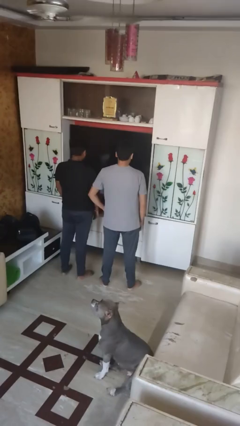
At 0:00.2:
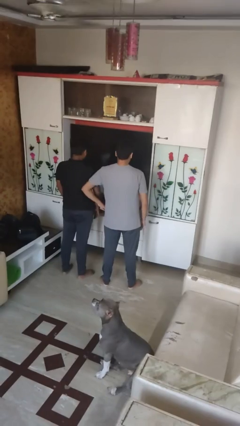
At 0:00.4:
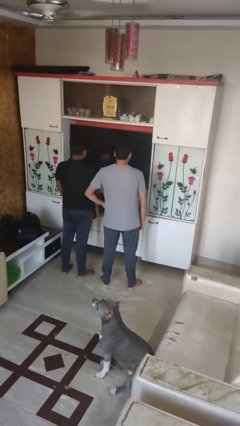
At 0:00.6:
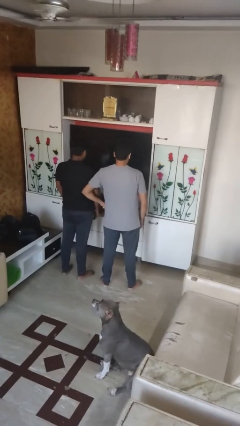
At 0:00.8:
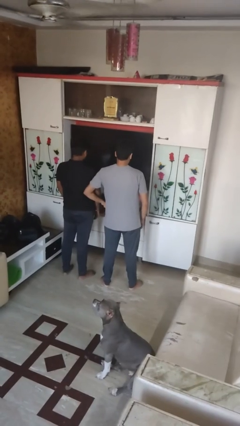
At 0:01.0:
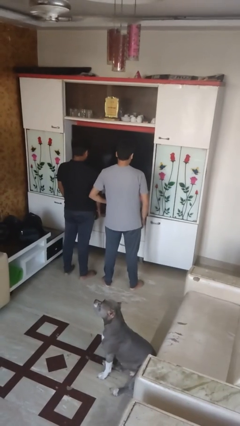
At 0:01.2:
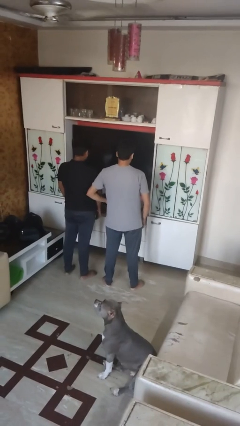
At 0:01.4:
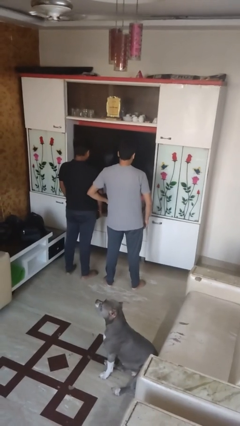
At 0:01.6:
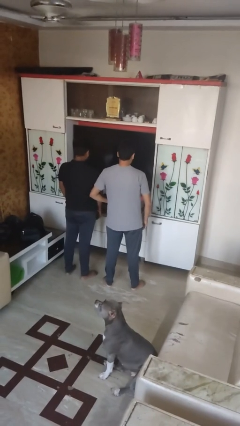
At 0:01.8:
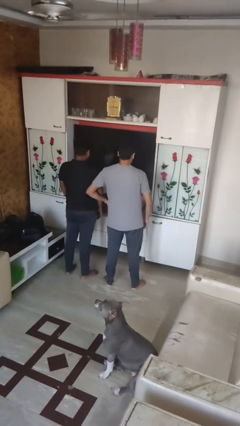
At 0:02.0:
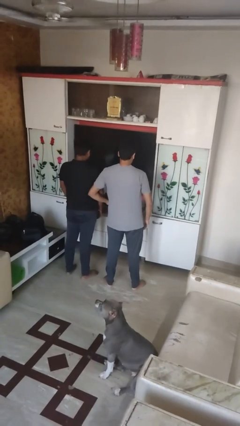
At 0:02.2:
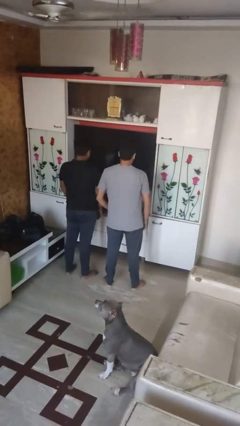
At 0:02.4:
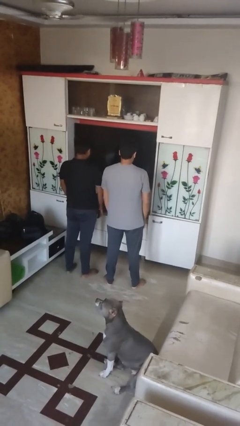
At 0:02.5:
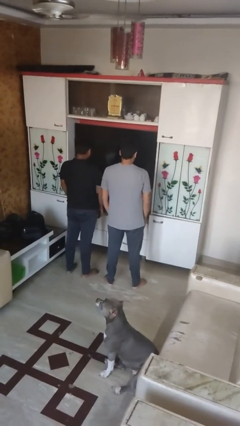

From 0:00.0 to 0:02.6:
person nudges person with elbow

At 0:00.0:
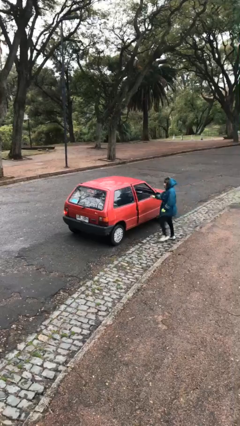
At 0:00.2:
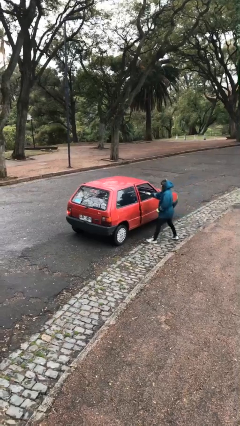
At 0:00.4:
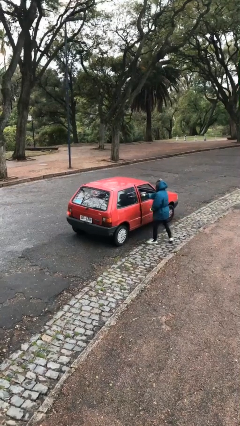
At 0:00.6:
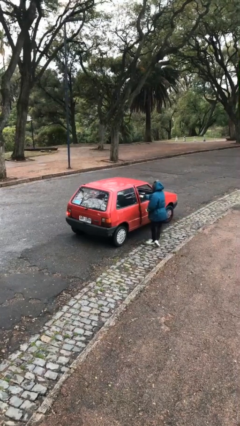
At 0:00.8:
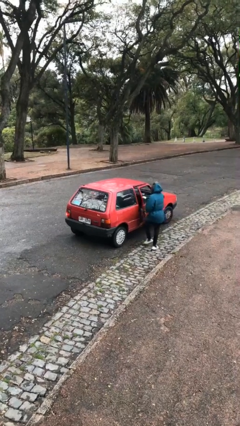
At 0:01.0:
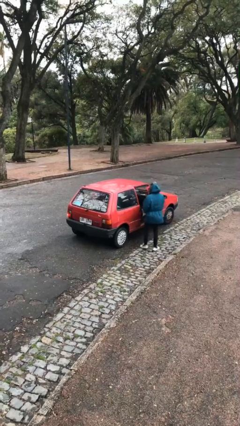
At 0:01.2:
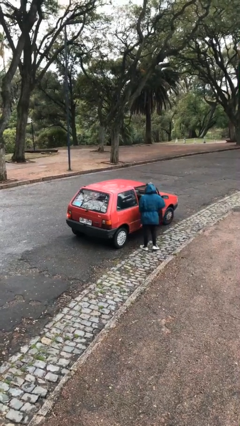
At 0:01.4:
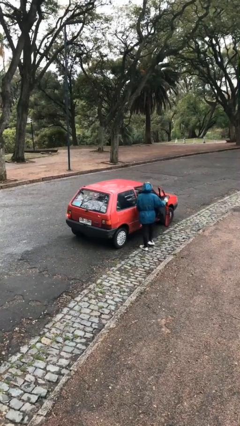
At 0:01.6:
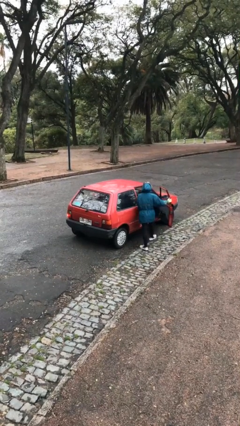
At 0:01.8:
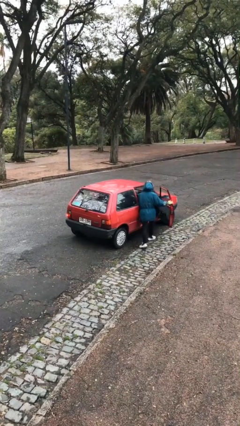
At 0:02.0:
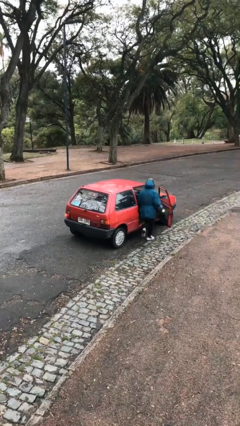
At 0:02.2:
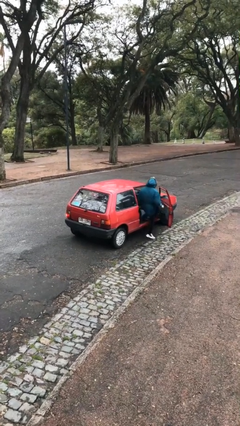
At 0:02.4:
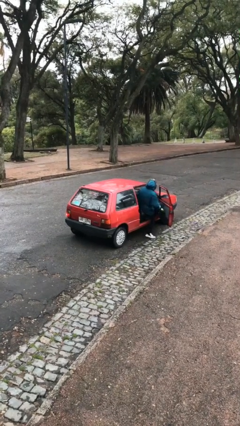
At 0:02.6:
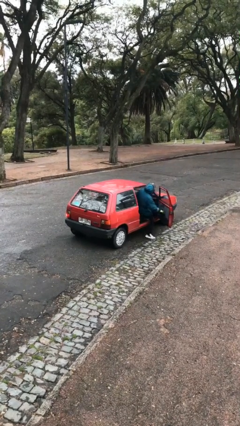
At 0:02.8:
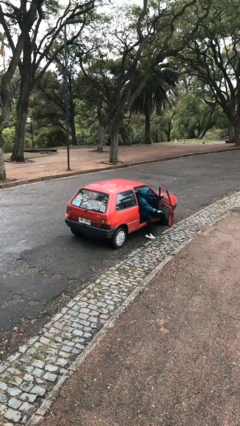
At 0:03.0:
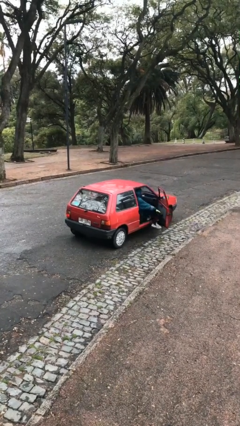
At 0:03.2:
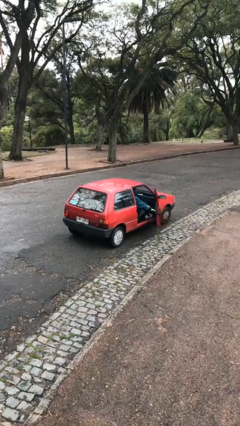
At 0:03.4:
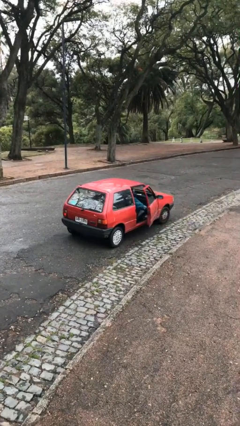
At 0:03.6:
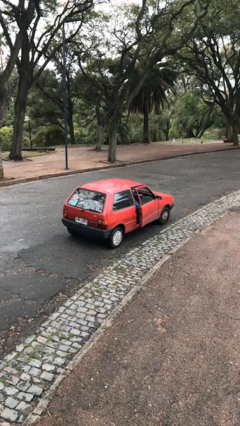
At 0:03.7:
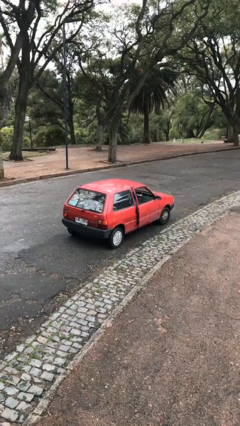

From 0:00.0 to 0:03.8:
car picks up person

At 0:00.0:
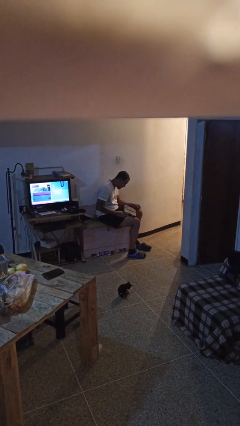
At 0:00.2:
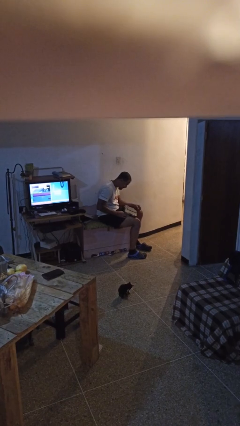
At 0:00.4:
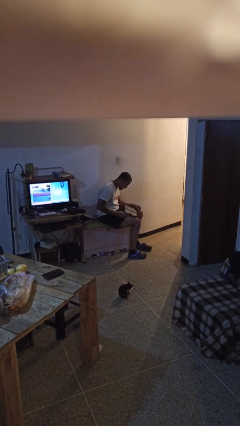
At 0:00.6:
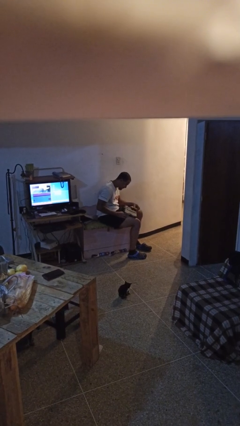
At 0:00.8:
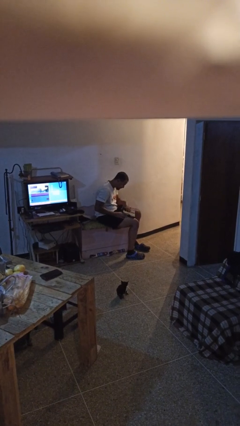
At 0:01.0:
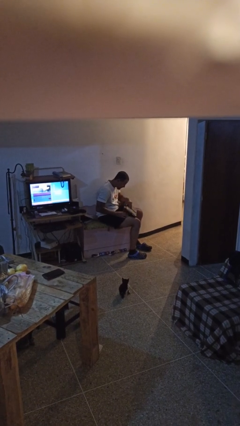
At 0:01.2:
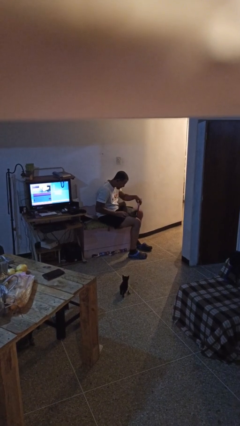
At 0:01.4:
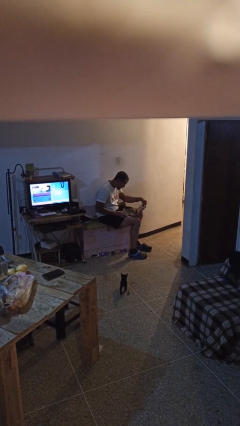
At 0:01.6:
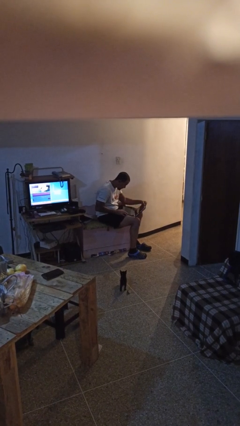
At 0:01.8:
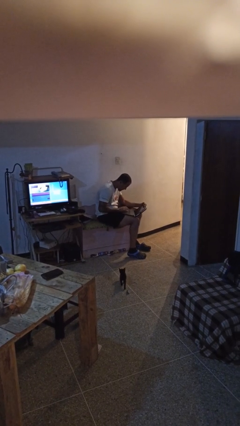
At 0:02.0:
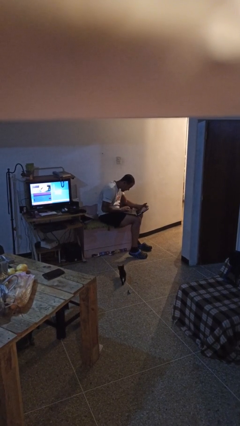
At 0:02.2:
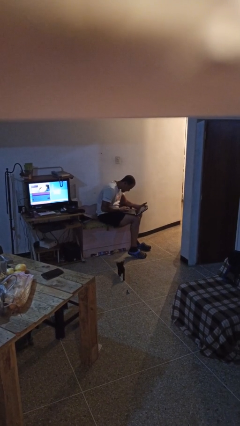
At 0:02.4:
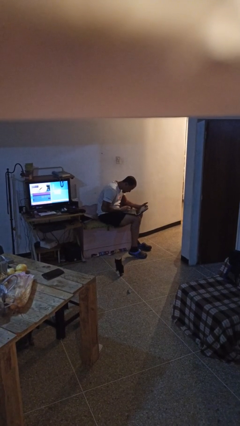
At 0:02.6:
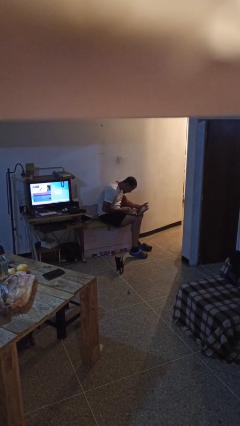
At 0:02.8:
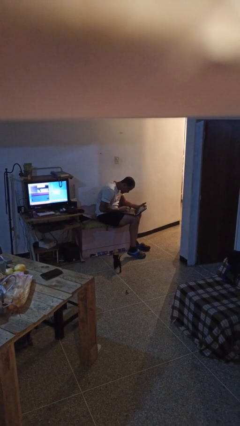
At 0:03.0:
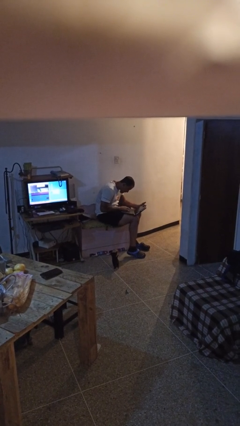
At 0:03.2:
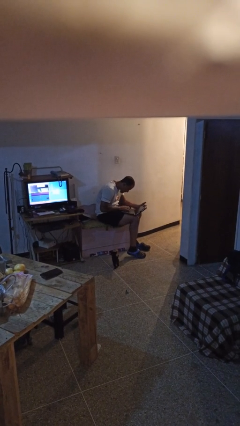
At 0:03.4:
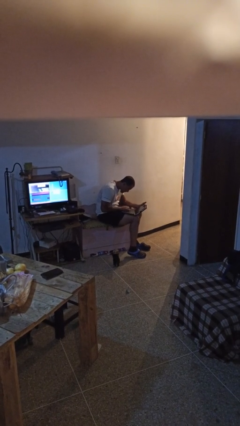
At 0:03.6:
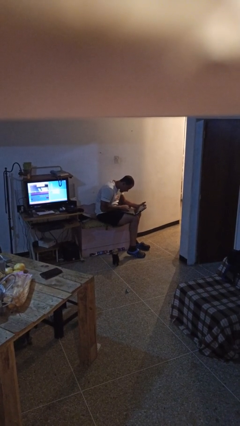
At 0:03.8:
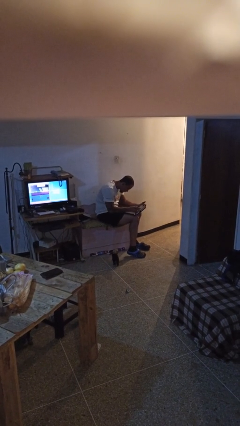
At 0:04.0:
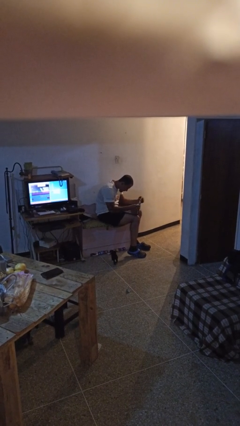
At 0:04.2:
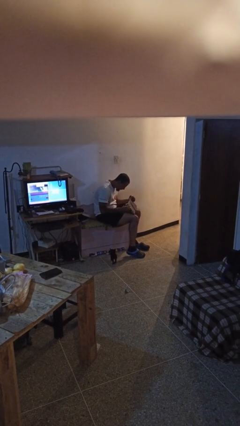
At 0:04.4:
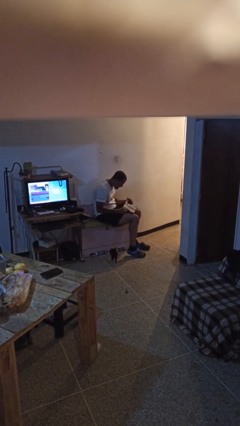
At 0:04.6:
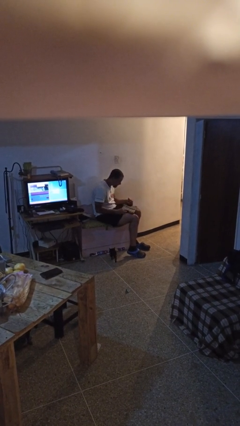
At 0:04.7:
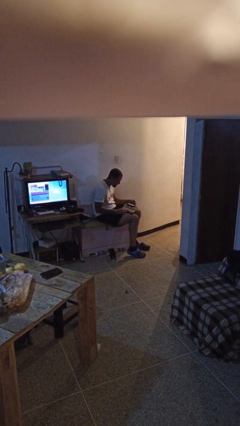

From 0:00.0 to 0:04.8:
person interacts with laptop

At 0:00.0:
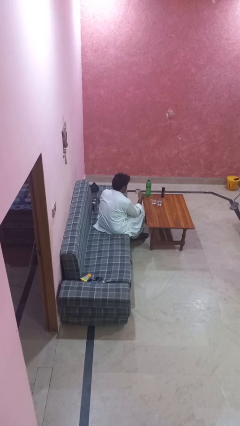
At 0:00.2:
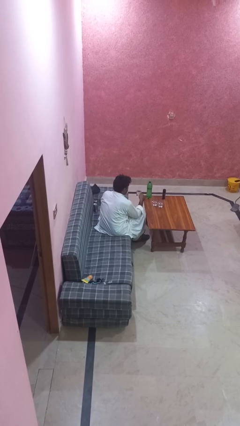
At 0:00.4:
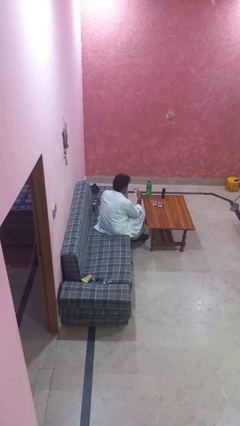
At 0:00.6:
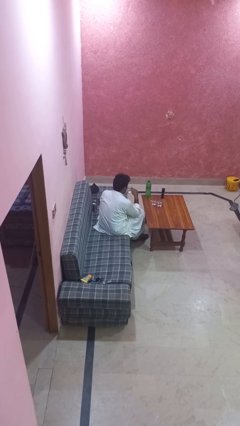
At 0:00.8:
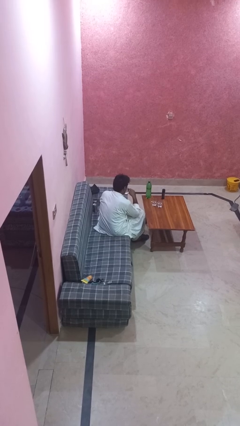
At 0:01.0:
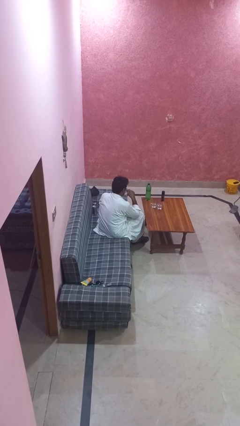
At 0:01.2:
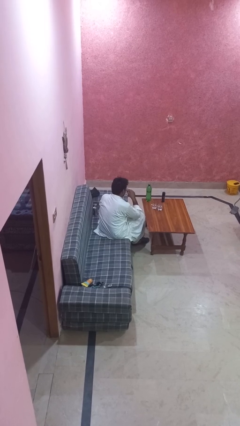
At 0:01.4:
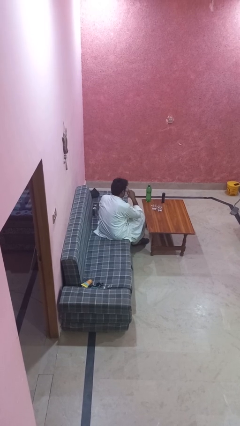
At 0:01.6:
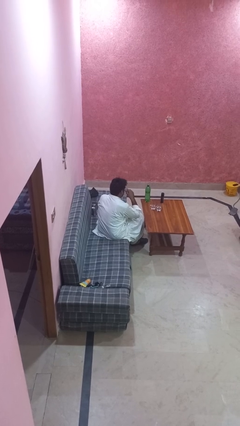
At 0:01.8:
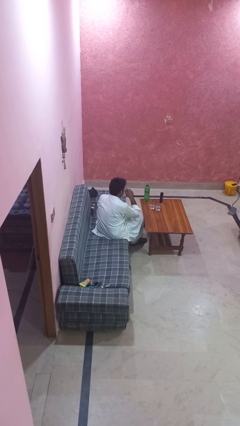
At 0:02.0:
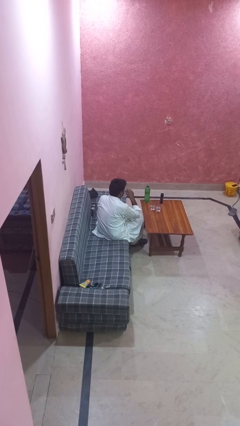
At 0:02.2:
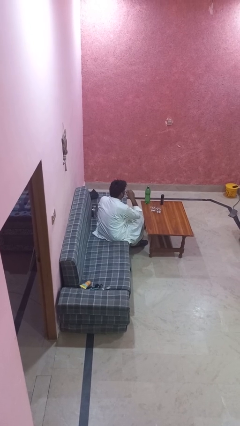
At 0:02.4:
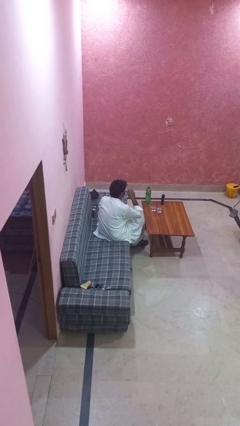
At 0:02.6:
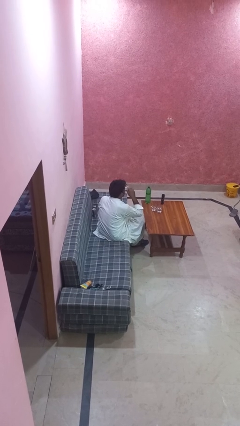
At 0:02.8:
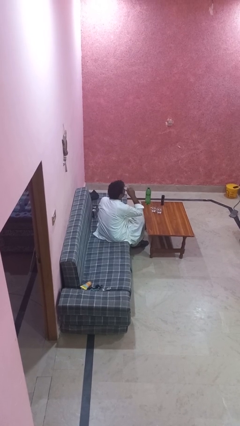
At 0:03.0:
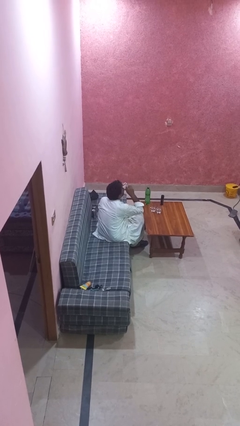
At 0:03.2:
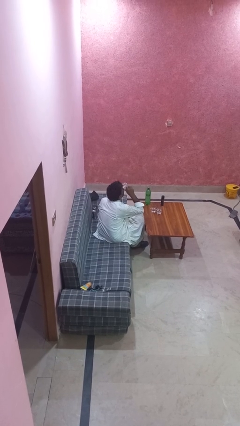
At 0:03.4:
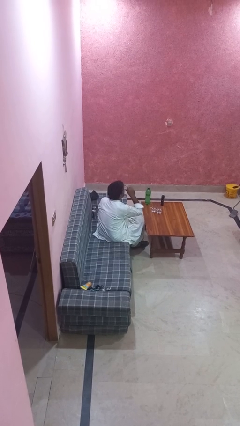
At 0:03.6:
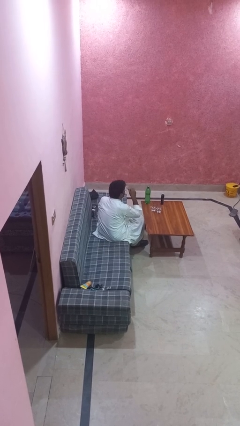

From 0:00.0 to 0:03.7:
person drinks from shotglass

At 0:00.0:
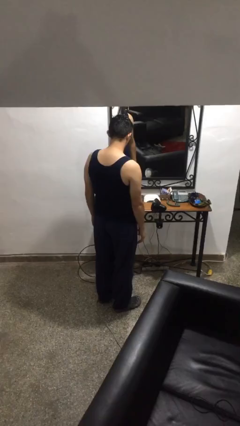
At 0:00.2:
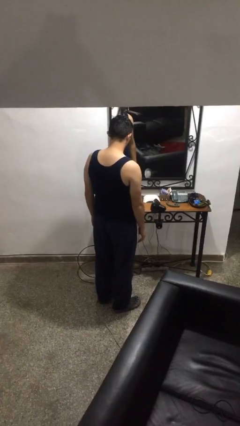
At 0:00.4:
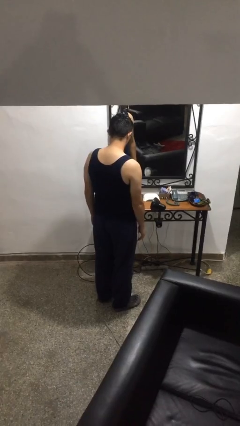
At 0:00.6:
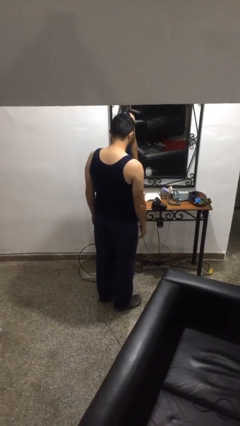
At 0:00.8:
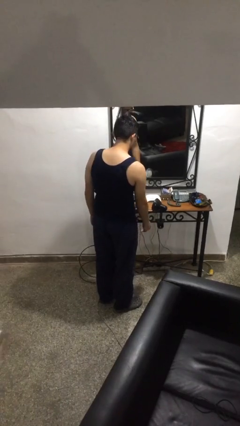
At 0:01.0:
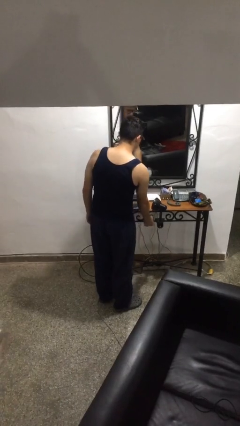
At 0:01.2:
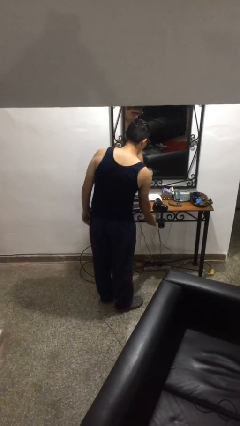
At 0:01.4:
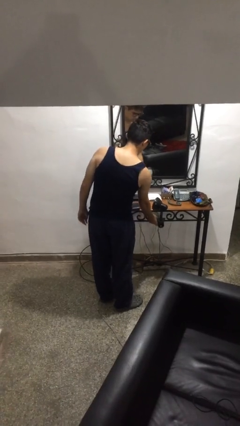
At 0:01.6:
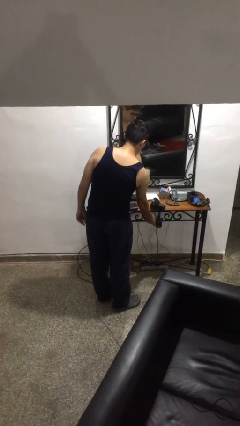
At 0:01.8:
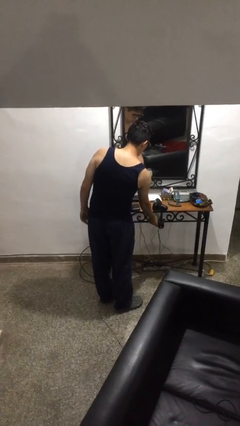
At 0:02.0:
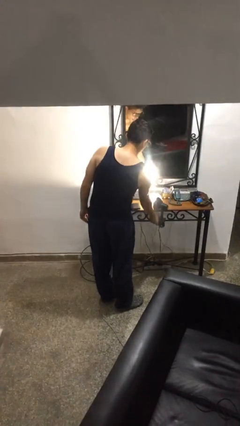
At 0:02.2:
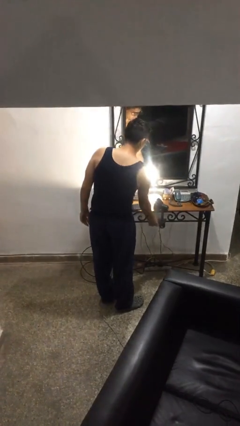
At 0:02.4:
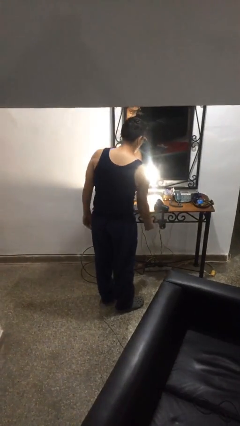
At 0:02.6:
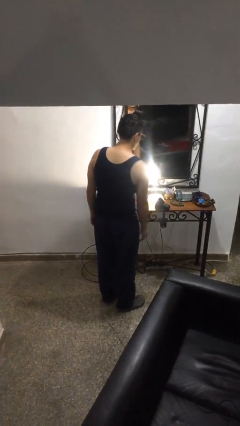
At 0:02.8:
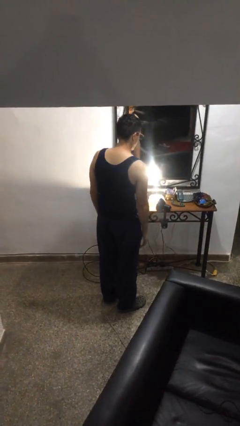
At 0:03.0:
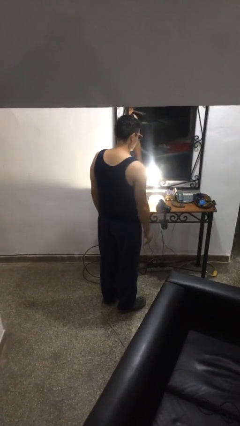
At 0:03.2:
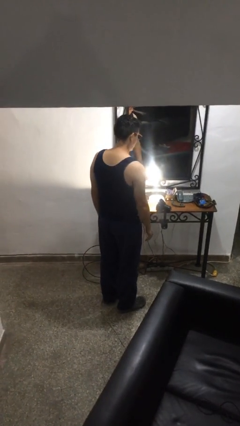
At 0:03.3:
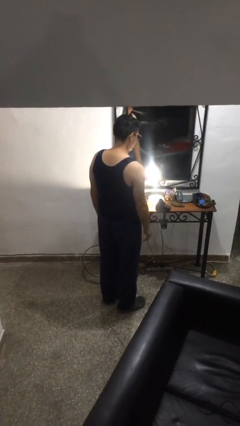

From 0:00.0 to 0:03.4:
person turns on lamp
